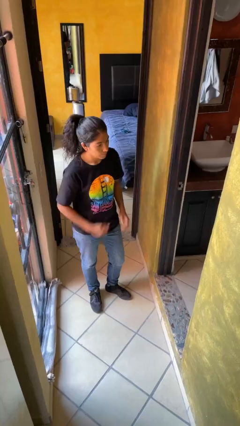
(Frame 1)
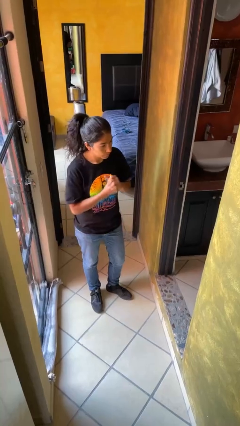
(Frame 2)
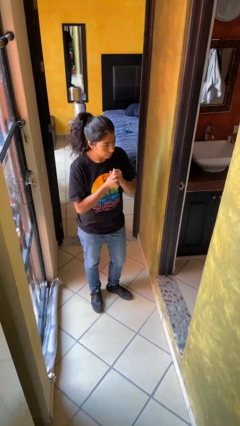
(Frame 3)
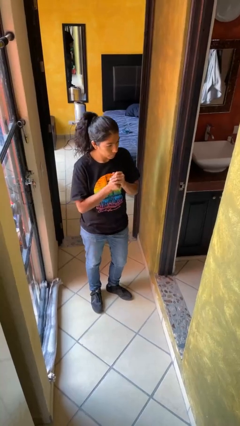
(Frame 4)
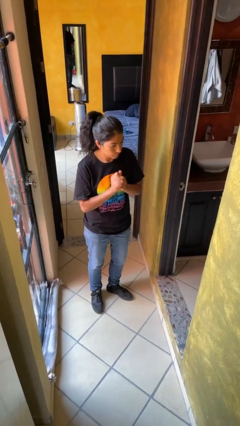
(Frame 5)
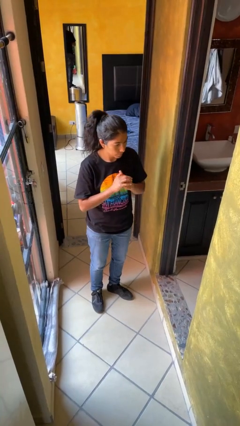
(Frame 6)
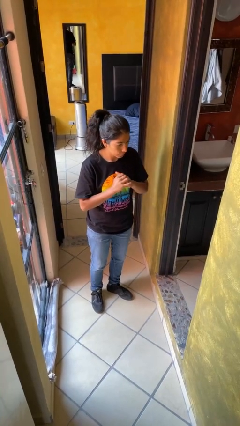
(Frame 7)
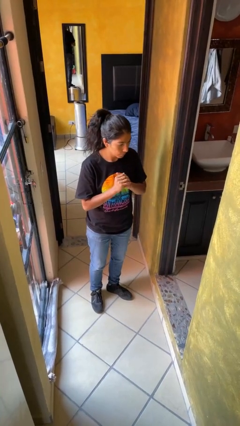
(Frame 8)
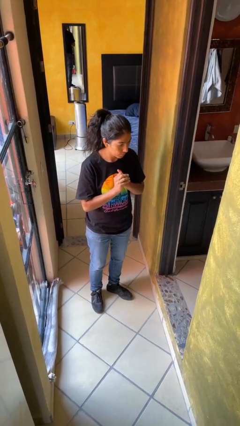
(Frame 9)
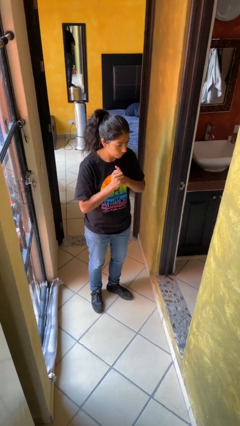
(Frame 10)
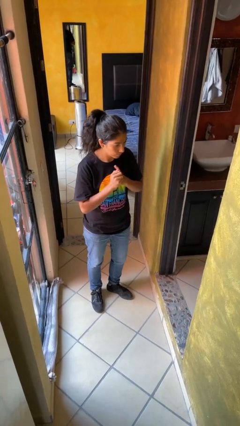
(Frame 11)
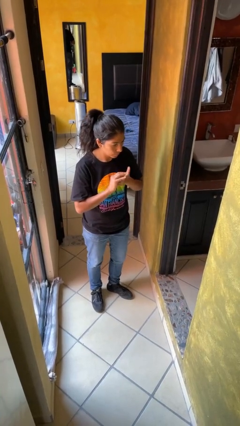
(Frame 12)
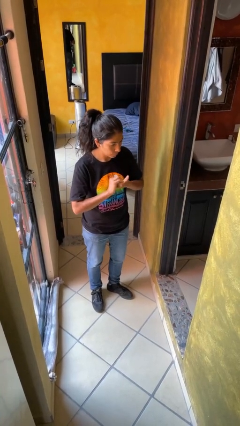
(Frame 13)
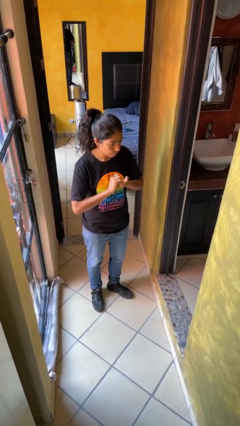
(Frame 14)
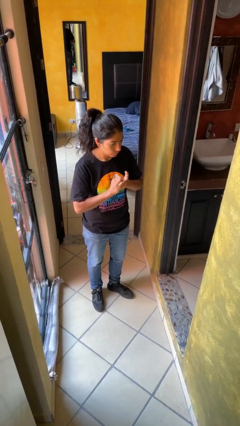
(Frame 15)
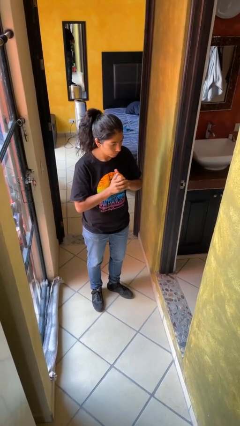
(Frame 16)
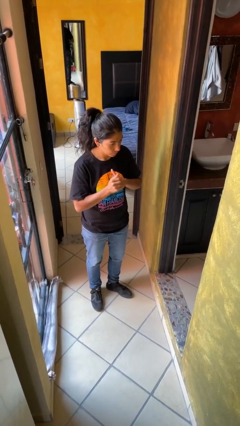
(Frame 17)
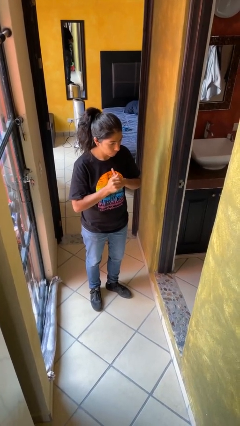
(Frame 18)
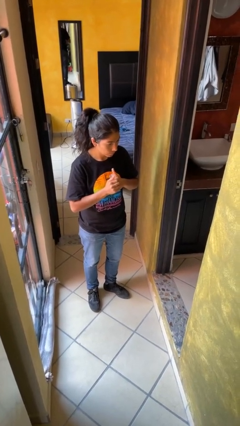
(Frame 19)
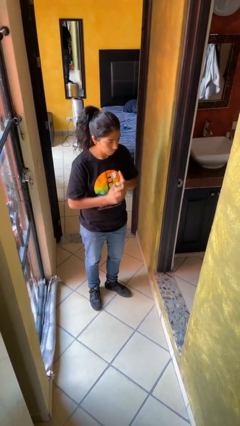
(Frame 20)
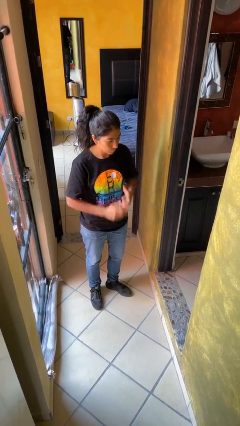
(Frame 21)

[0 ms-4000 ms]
person cracks knuckles

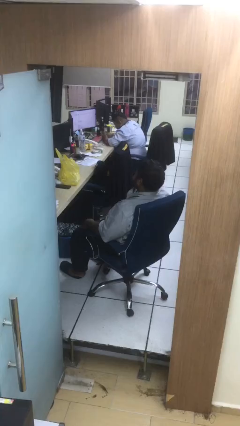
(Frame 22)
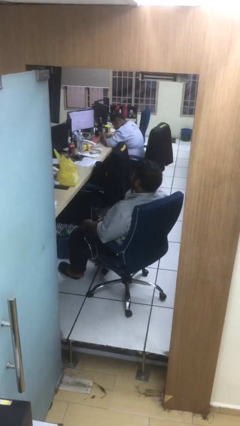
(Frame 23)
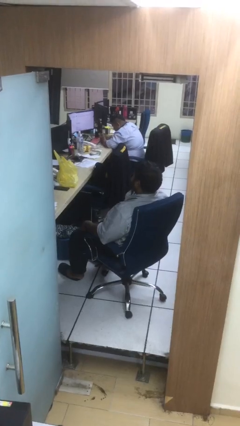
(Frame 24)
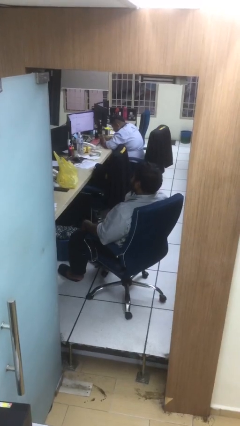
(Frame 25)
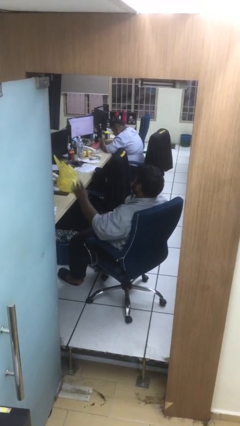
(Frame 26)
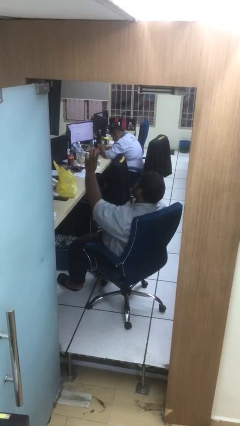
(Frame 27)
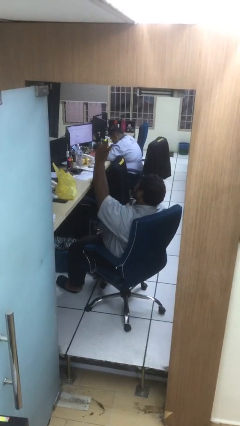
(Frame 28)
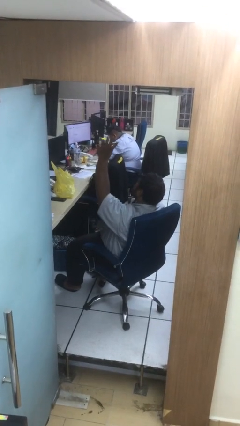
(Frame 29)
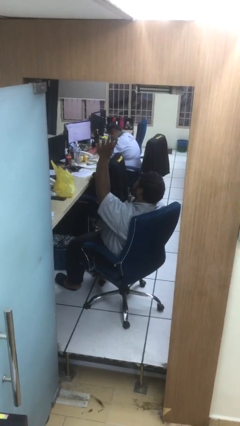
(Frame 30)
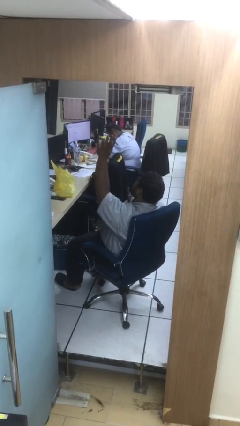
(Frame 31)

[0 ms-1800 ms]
person gestures raise hand

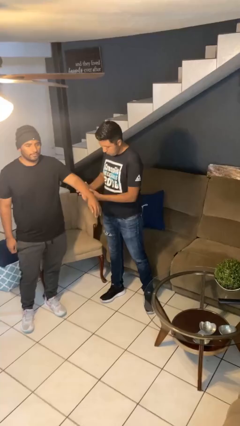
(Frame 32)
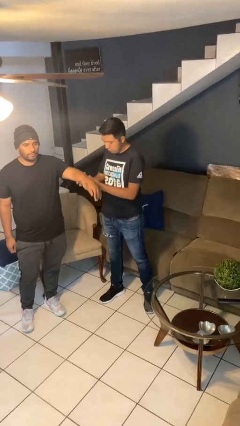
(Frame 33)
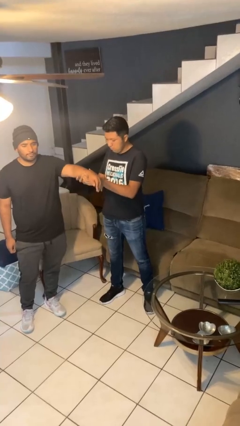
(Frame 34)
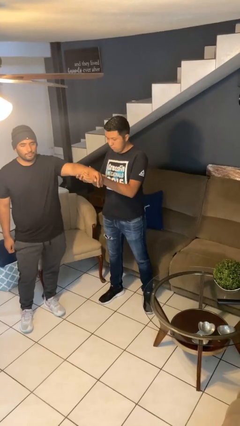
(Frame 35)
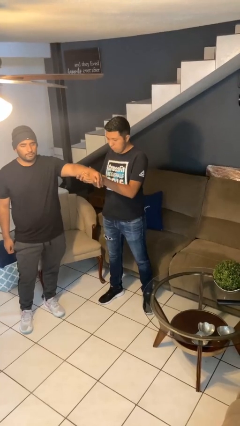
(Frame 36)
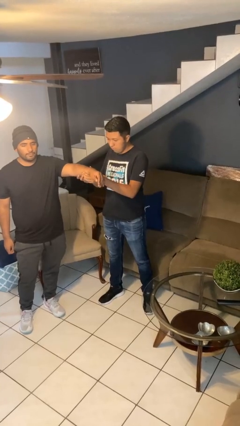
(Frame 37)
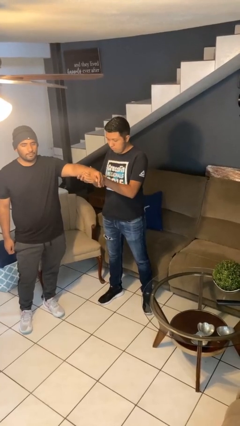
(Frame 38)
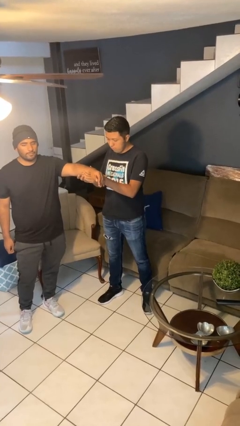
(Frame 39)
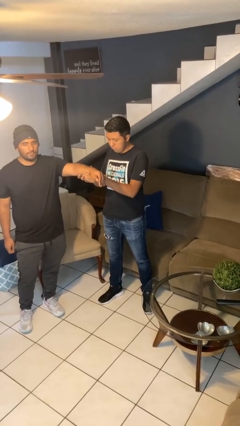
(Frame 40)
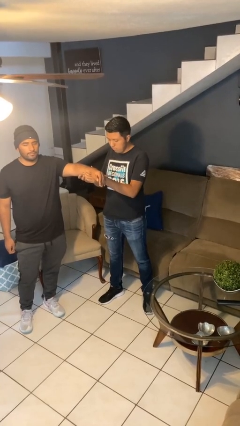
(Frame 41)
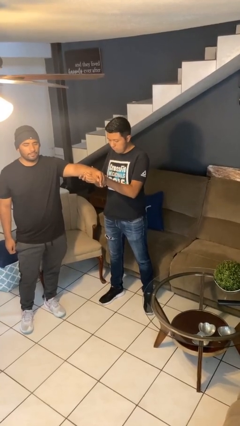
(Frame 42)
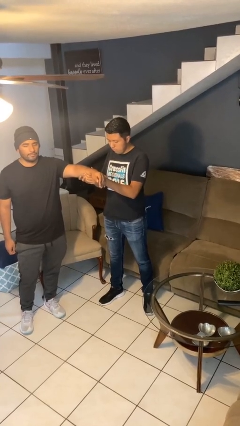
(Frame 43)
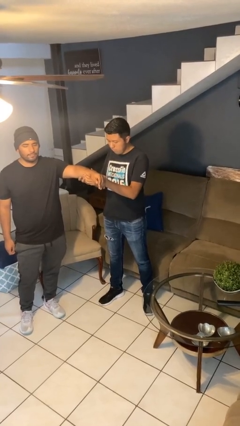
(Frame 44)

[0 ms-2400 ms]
person grabs person by forearm

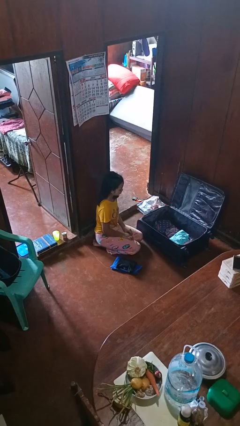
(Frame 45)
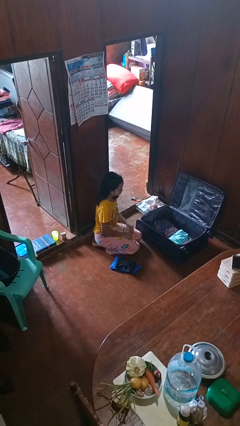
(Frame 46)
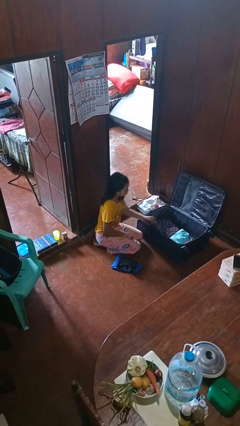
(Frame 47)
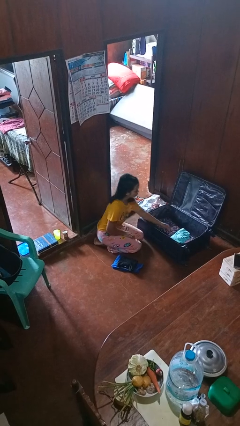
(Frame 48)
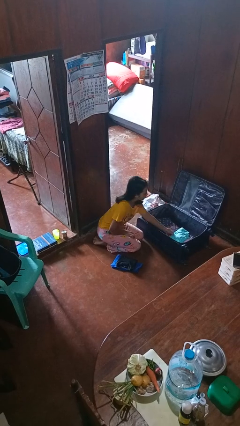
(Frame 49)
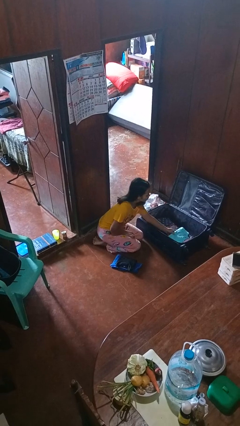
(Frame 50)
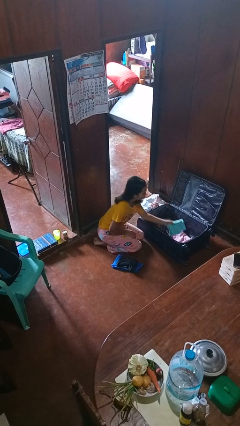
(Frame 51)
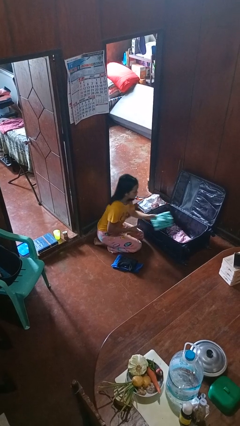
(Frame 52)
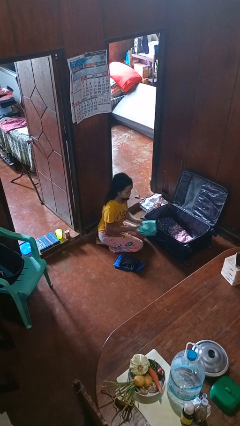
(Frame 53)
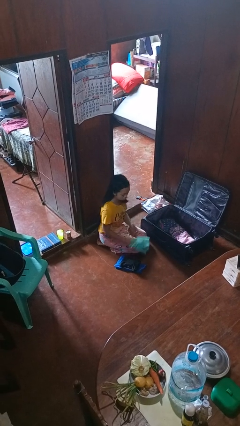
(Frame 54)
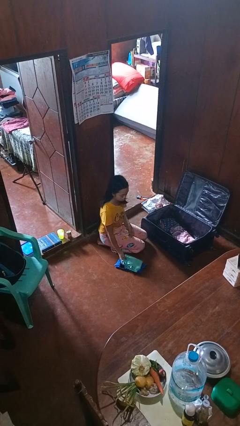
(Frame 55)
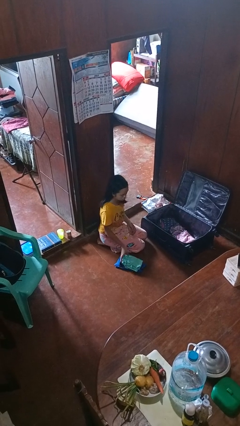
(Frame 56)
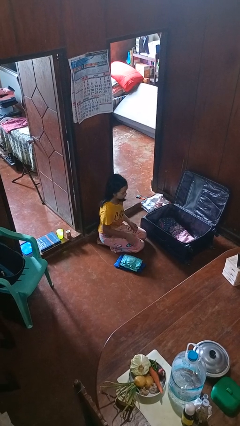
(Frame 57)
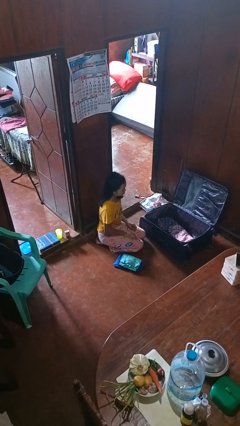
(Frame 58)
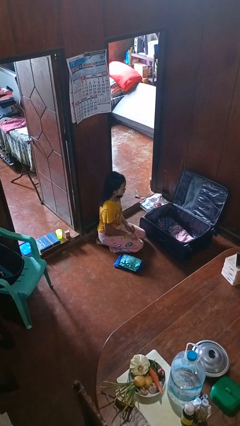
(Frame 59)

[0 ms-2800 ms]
person unloads clothes from suitcase

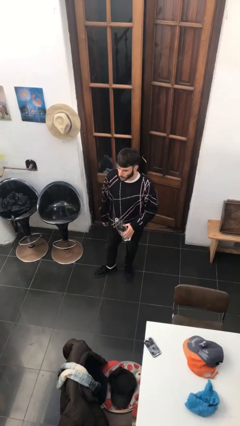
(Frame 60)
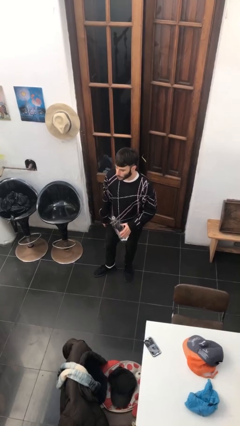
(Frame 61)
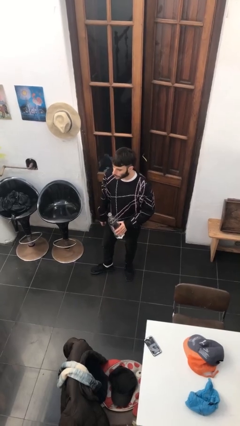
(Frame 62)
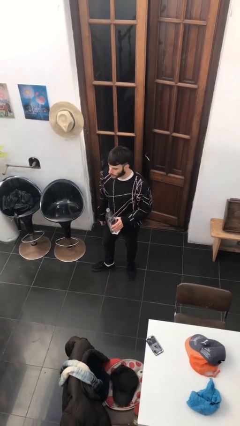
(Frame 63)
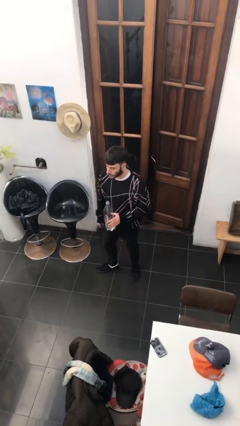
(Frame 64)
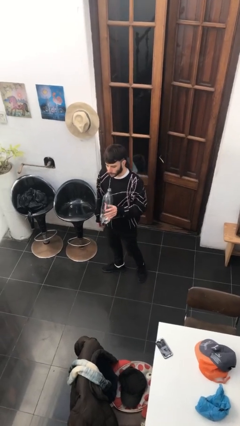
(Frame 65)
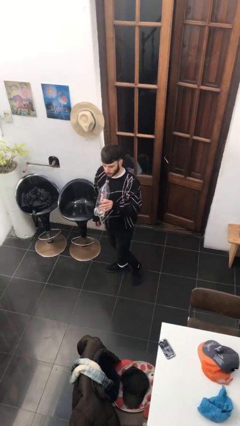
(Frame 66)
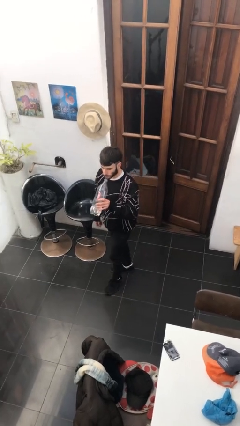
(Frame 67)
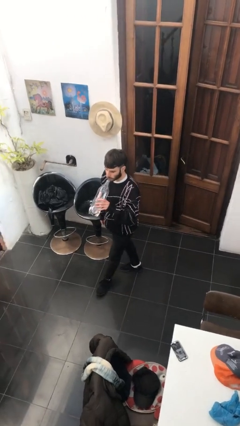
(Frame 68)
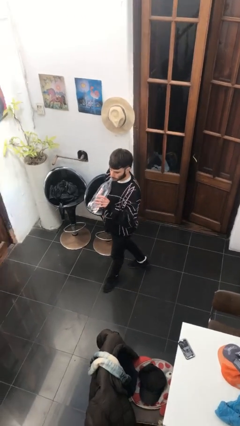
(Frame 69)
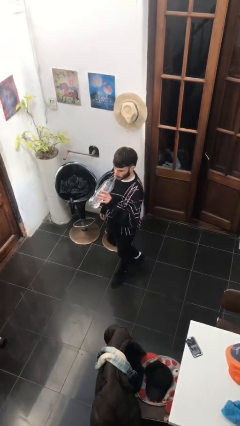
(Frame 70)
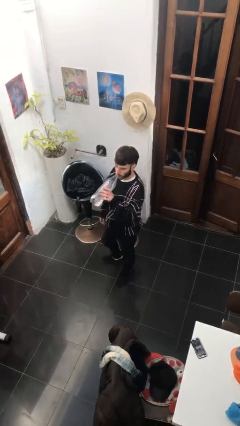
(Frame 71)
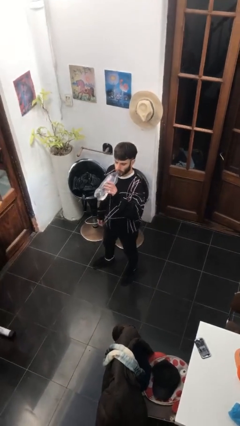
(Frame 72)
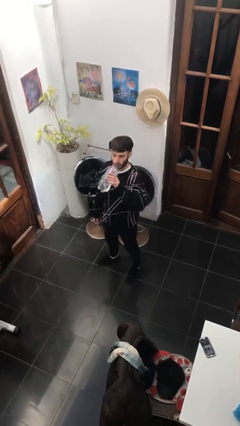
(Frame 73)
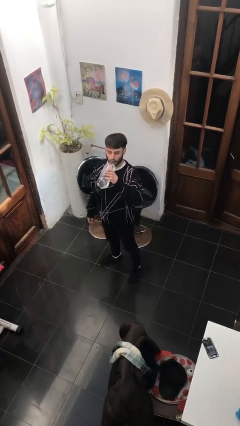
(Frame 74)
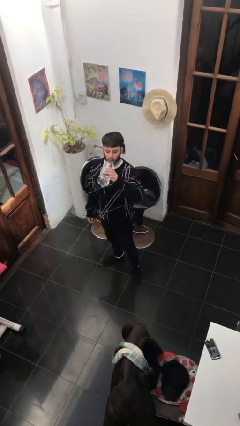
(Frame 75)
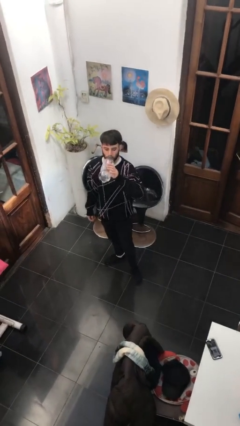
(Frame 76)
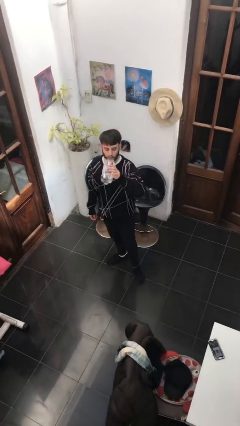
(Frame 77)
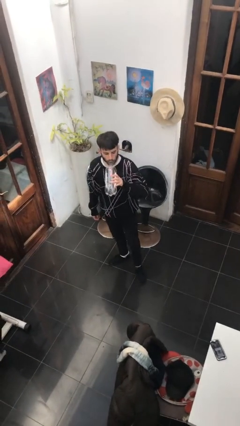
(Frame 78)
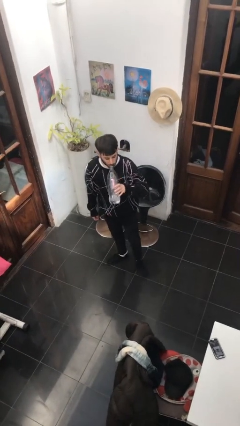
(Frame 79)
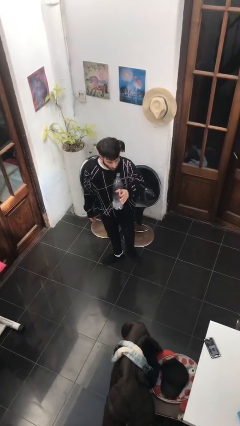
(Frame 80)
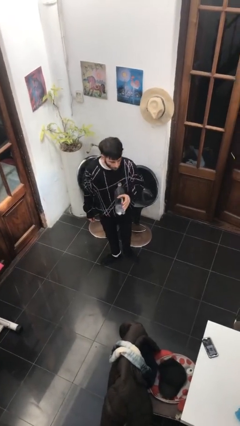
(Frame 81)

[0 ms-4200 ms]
person drinks from bottle

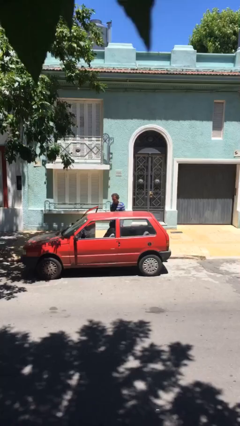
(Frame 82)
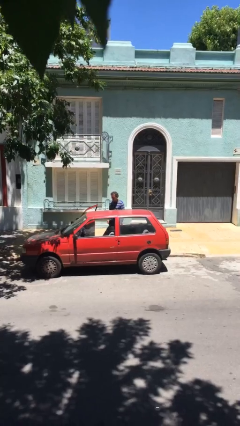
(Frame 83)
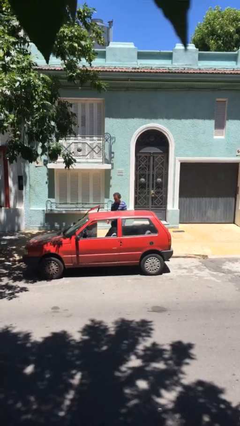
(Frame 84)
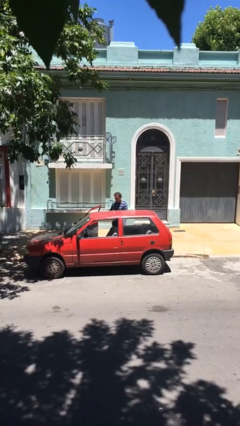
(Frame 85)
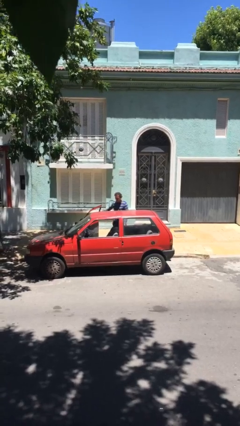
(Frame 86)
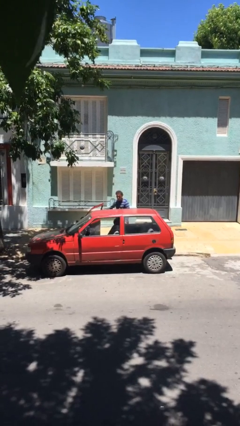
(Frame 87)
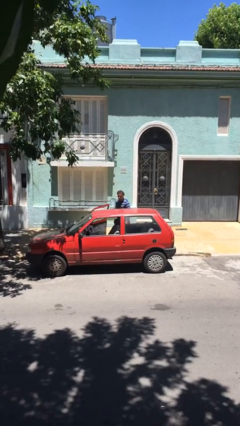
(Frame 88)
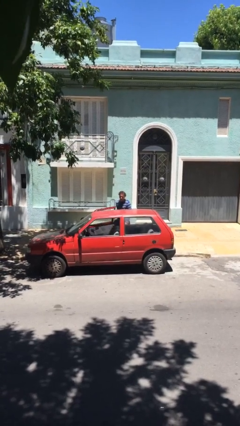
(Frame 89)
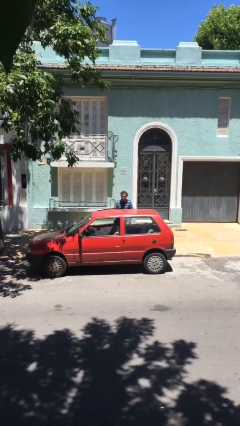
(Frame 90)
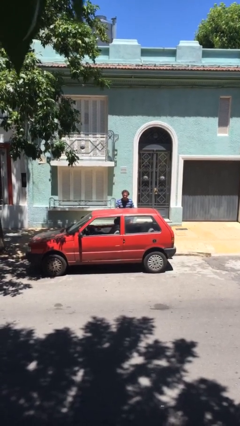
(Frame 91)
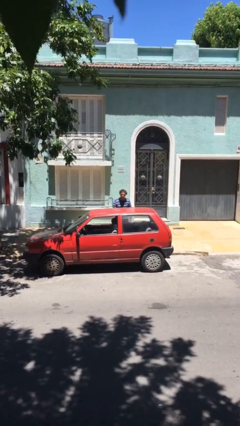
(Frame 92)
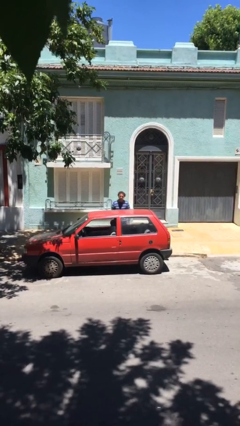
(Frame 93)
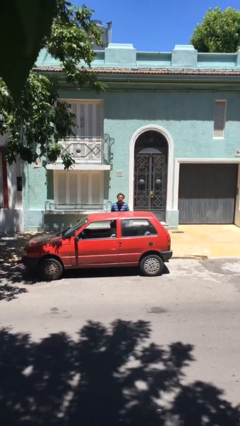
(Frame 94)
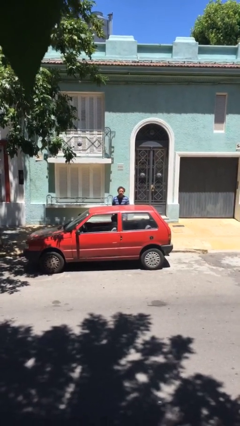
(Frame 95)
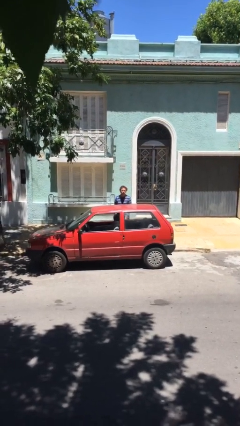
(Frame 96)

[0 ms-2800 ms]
person closes car door
